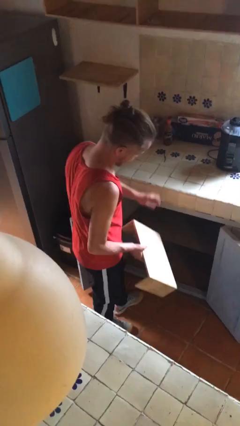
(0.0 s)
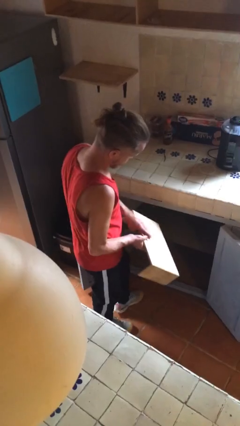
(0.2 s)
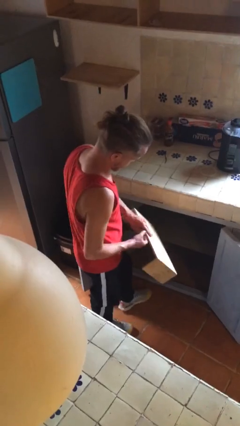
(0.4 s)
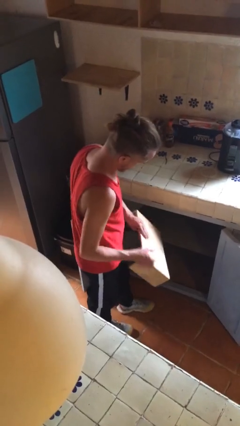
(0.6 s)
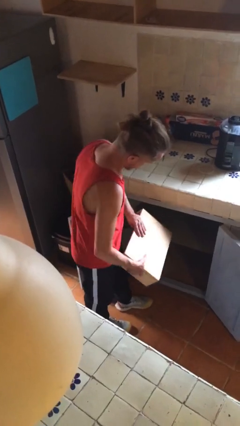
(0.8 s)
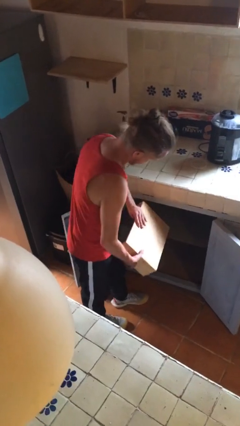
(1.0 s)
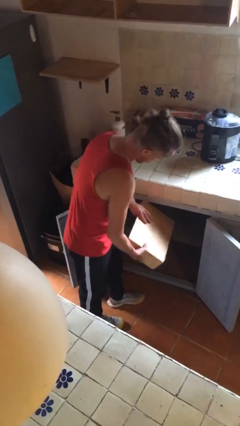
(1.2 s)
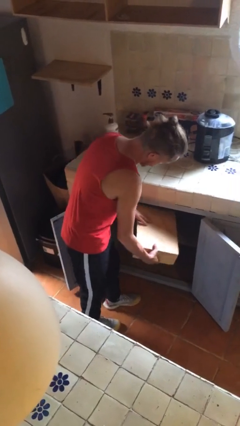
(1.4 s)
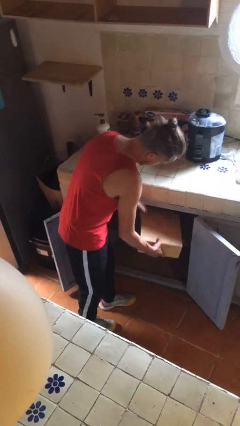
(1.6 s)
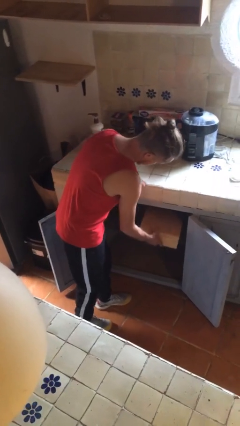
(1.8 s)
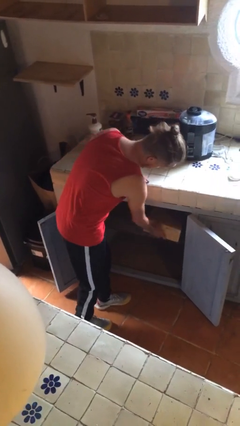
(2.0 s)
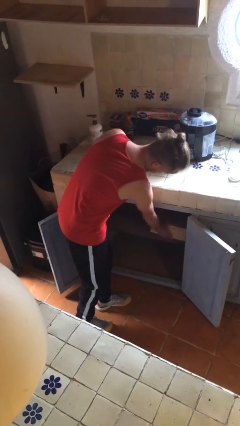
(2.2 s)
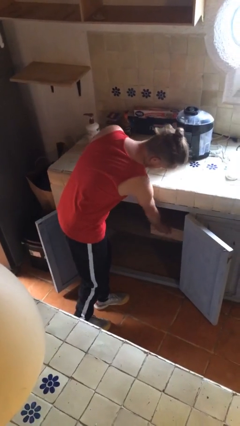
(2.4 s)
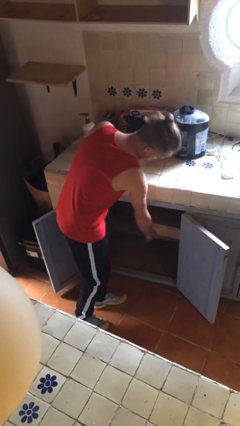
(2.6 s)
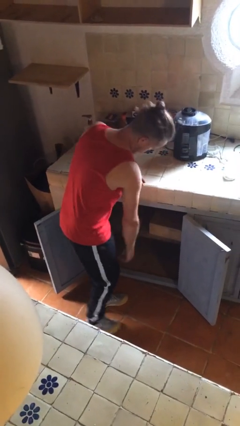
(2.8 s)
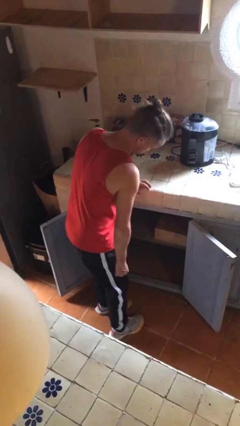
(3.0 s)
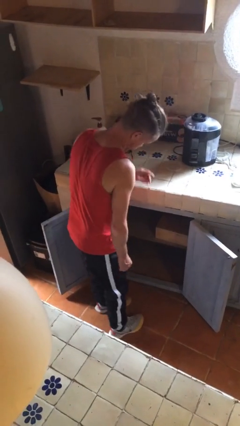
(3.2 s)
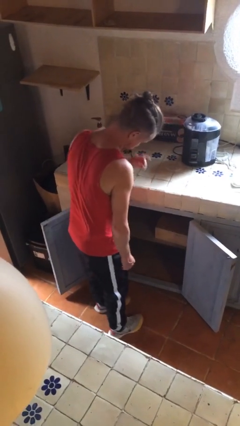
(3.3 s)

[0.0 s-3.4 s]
person puts down object into cabinet

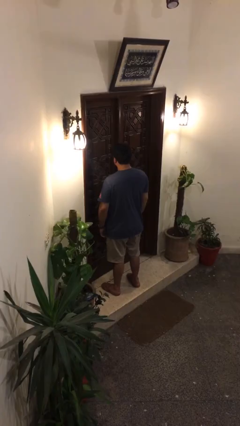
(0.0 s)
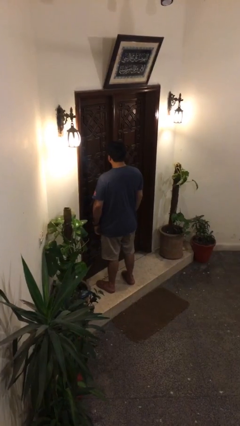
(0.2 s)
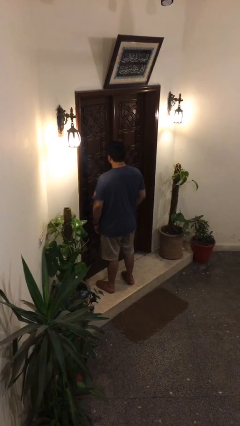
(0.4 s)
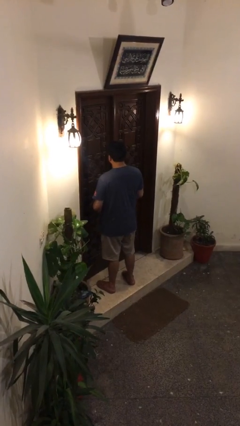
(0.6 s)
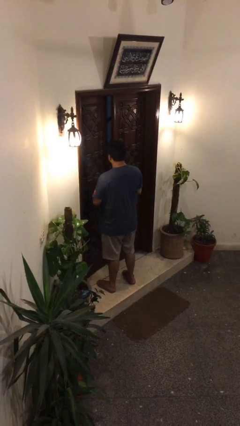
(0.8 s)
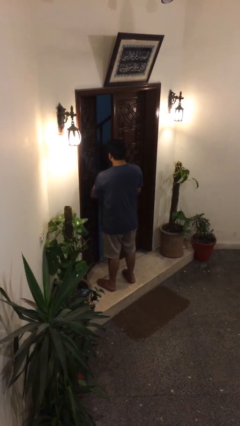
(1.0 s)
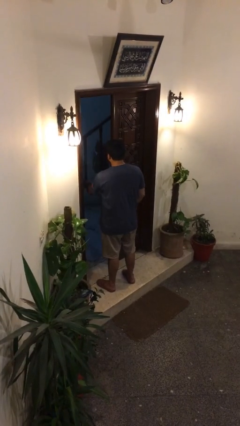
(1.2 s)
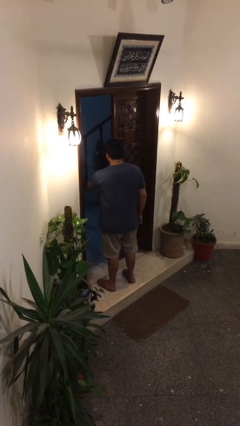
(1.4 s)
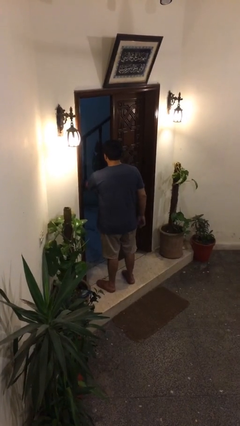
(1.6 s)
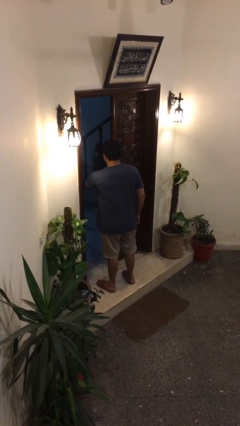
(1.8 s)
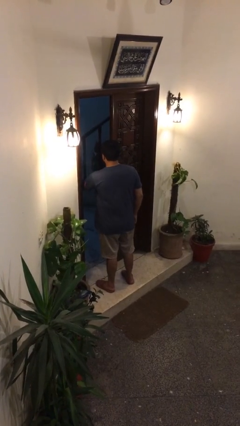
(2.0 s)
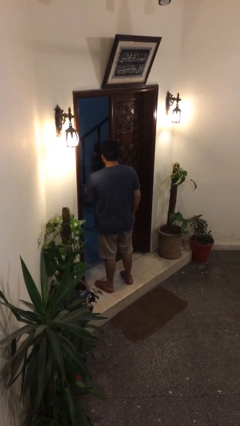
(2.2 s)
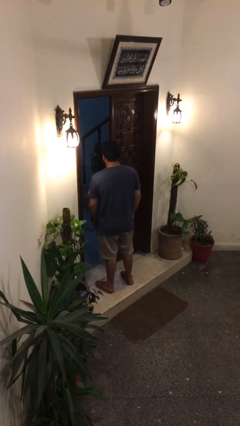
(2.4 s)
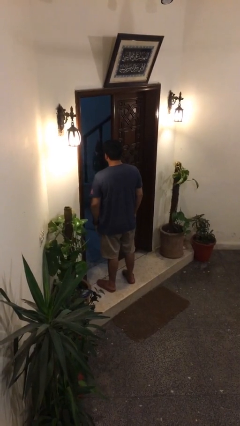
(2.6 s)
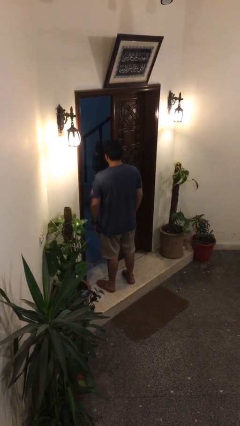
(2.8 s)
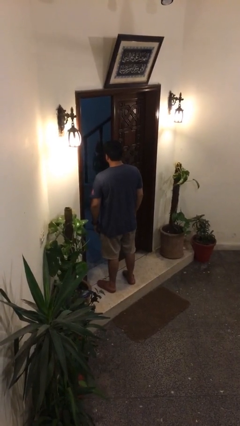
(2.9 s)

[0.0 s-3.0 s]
person opens facility door

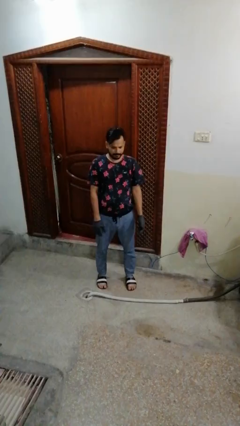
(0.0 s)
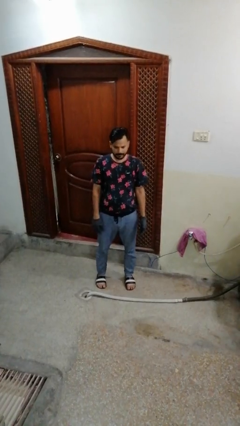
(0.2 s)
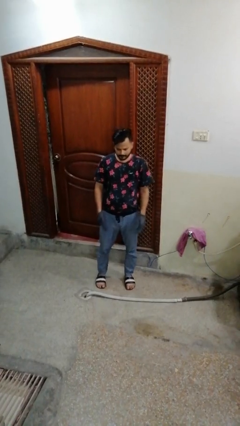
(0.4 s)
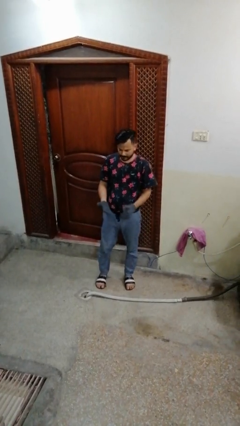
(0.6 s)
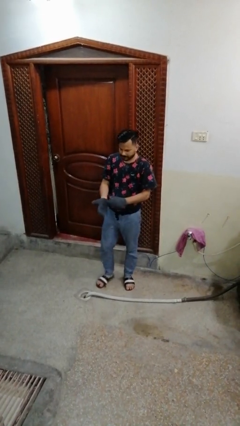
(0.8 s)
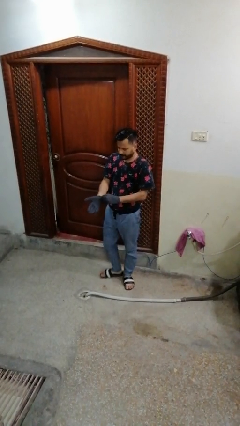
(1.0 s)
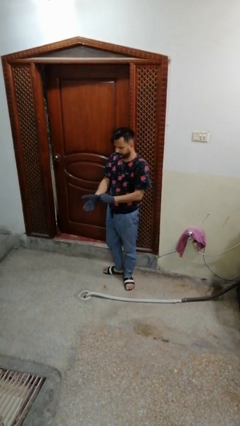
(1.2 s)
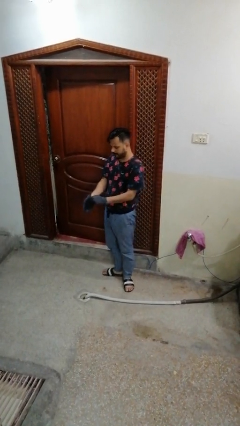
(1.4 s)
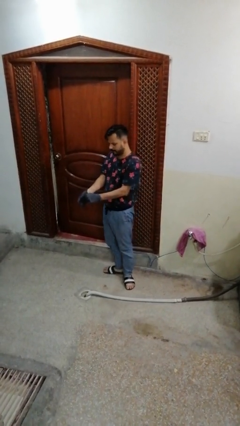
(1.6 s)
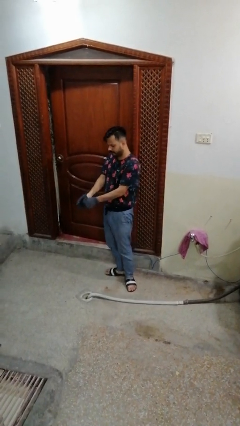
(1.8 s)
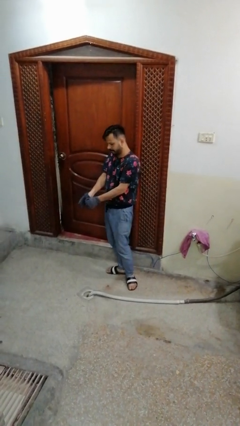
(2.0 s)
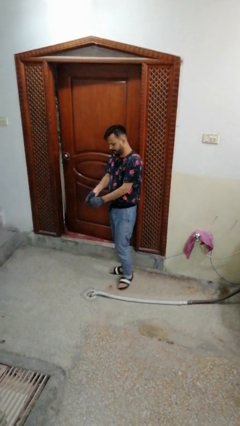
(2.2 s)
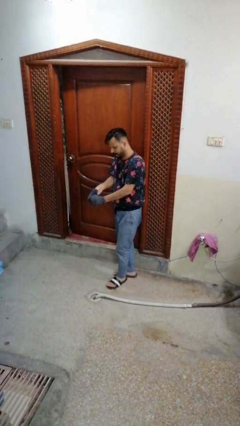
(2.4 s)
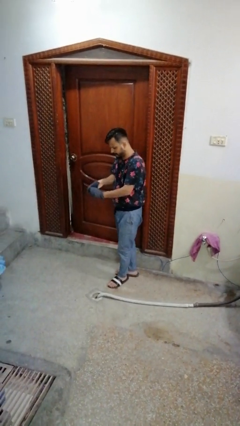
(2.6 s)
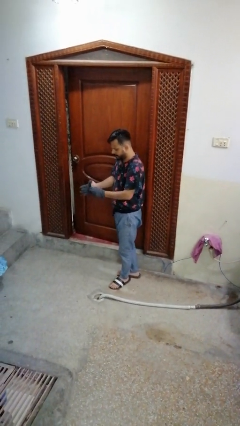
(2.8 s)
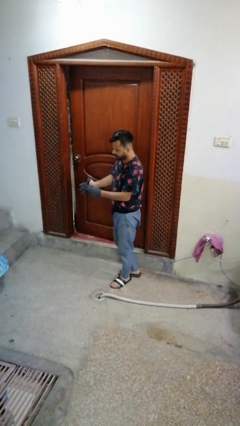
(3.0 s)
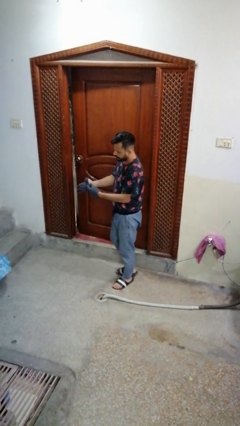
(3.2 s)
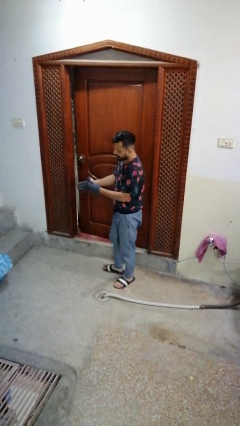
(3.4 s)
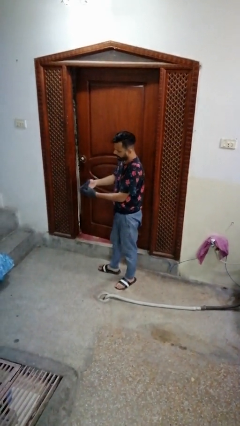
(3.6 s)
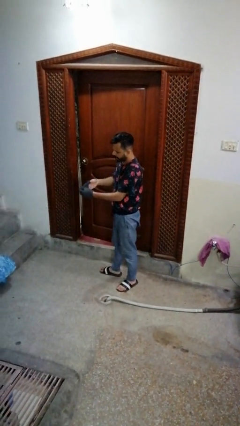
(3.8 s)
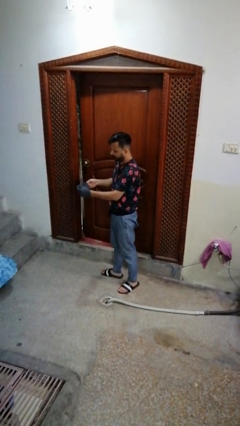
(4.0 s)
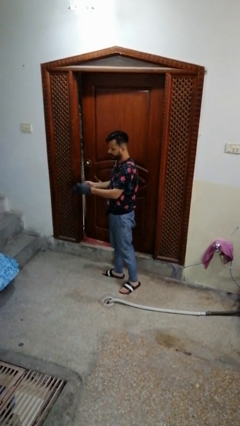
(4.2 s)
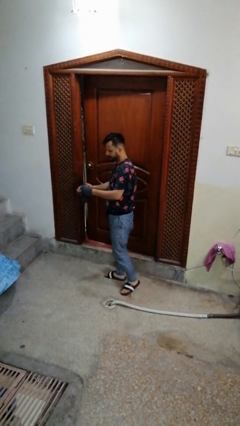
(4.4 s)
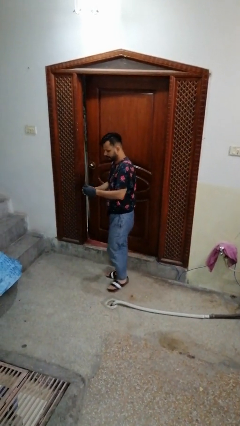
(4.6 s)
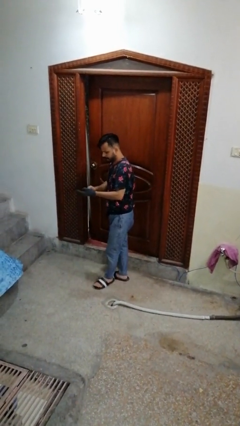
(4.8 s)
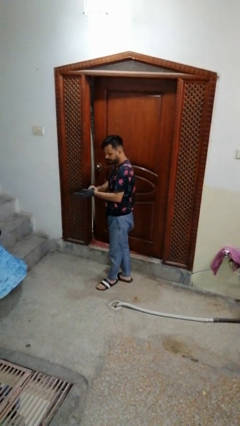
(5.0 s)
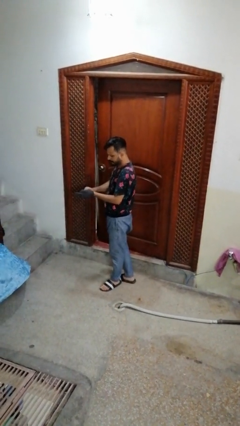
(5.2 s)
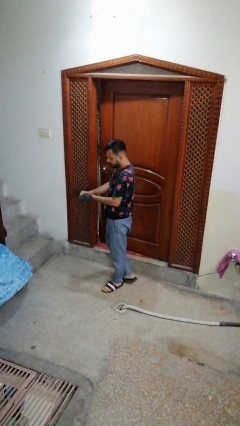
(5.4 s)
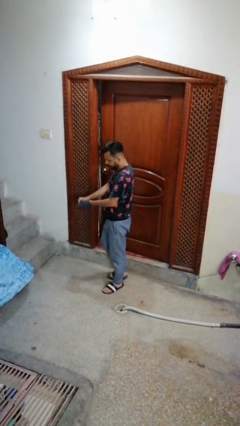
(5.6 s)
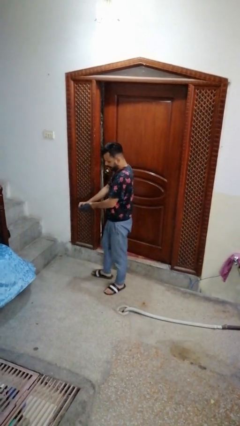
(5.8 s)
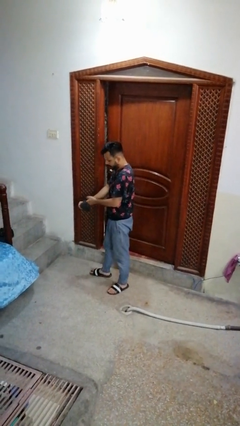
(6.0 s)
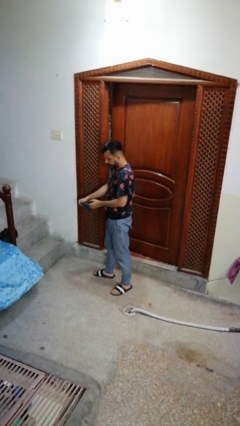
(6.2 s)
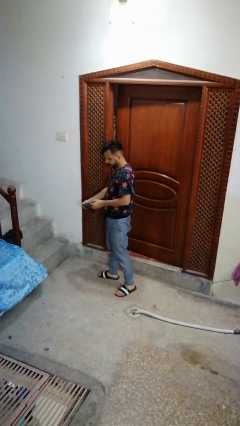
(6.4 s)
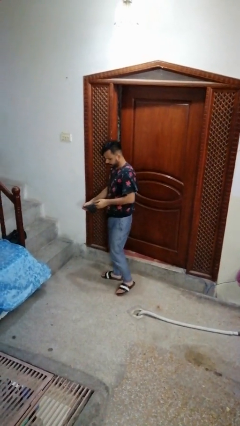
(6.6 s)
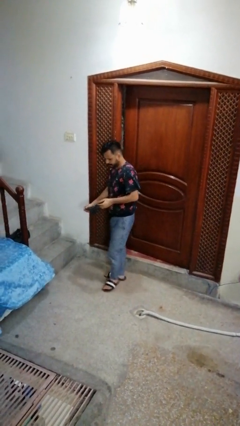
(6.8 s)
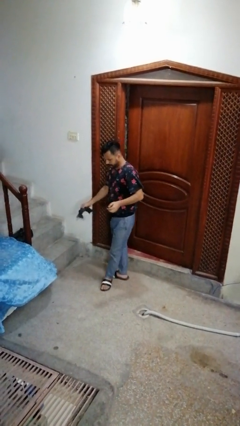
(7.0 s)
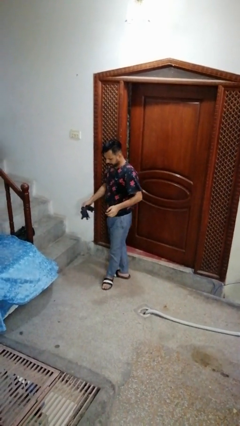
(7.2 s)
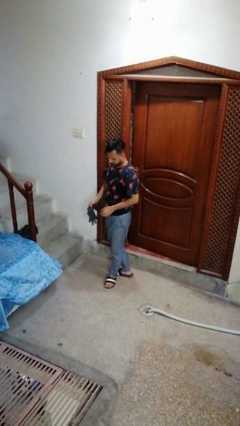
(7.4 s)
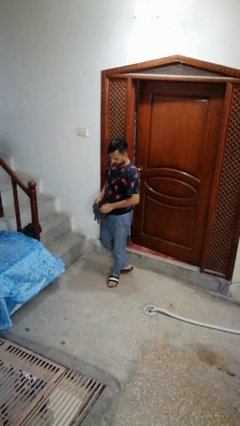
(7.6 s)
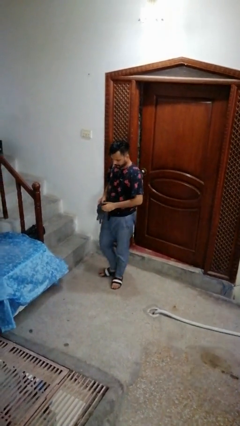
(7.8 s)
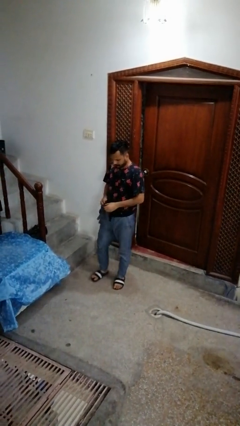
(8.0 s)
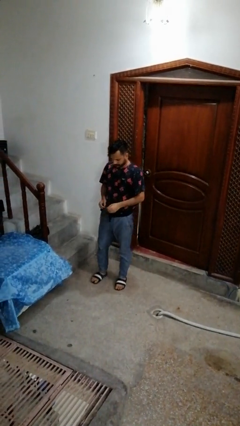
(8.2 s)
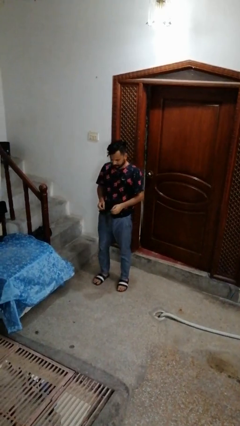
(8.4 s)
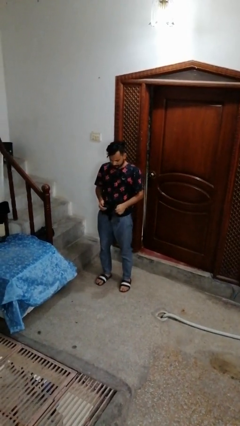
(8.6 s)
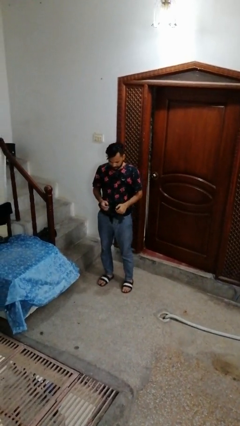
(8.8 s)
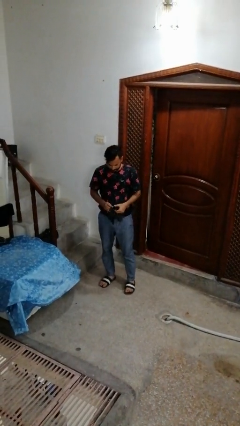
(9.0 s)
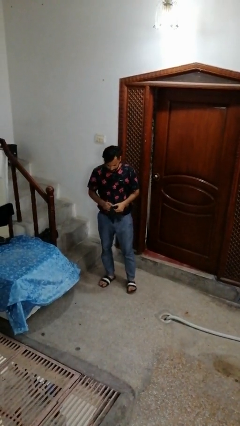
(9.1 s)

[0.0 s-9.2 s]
person takes off gloves

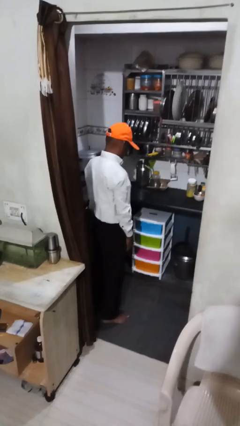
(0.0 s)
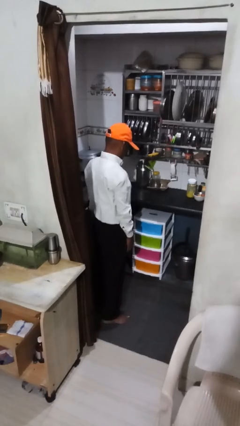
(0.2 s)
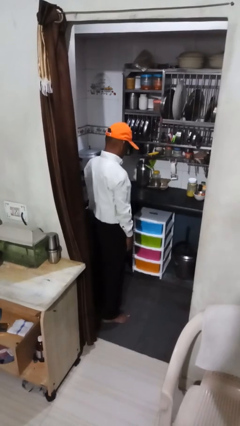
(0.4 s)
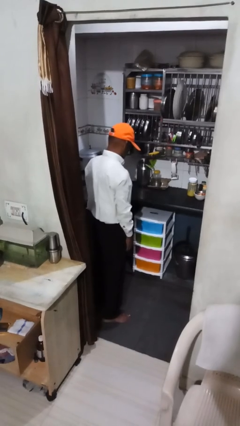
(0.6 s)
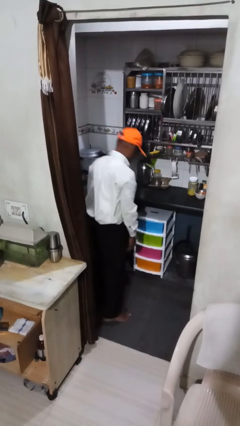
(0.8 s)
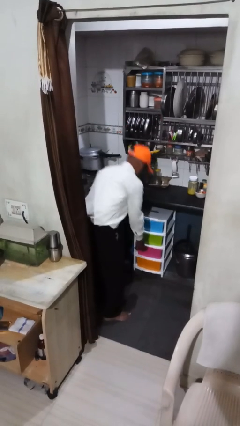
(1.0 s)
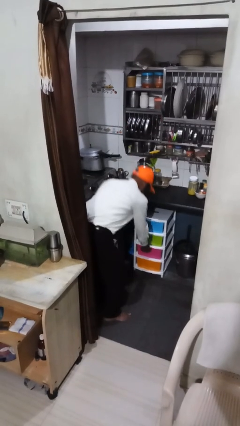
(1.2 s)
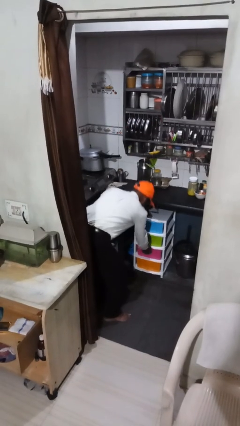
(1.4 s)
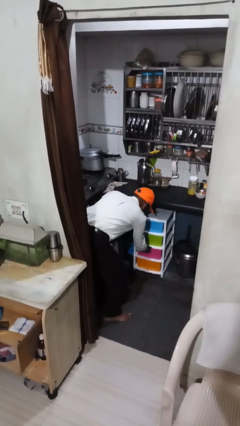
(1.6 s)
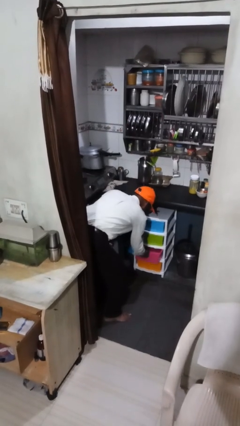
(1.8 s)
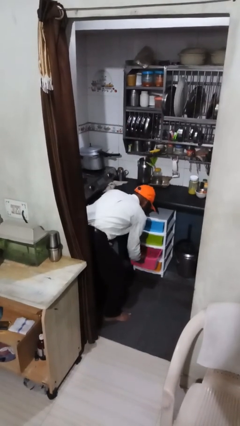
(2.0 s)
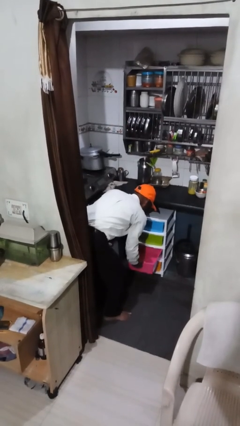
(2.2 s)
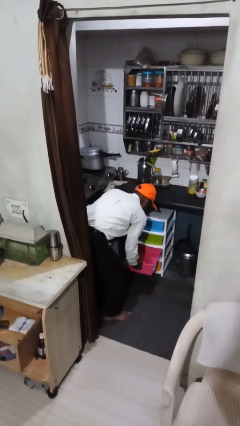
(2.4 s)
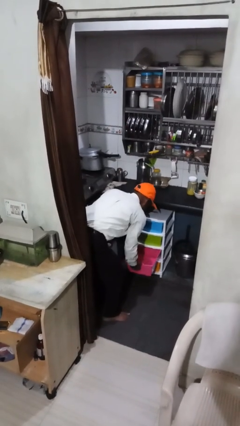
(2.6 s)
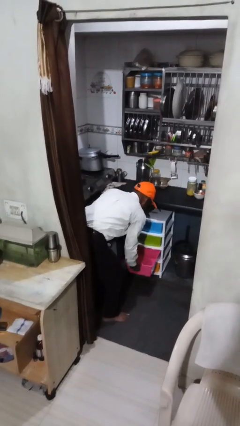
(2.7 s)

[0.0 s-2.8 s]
person opens kitchen drawer
